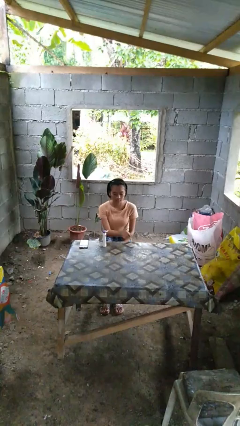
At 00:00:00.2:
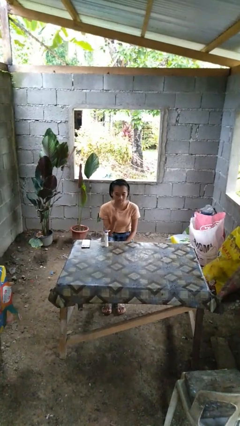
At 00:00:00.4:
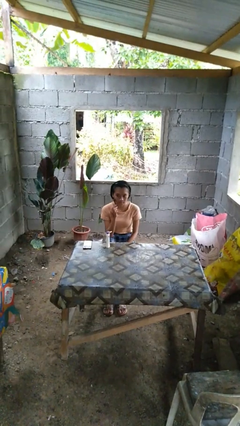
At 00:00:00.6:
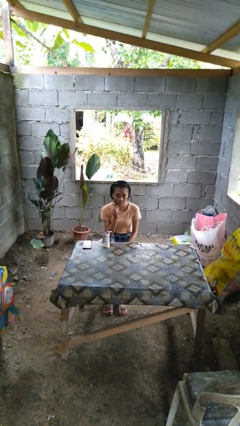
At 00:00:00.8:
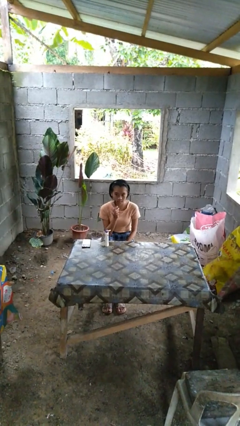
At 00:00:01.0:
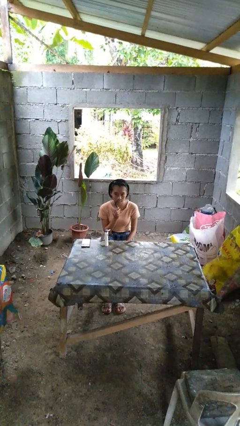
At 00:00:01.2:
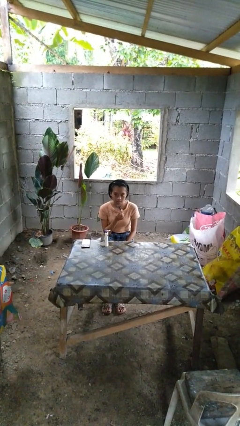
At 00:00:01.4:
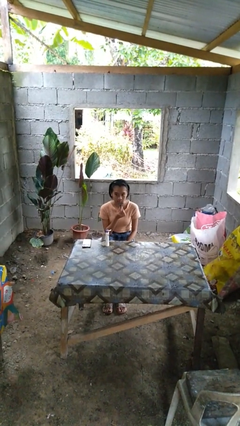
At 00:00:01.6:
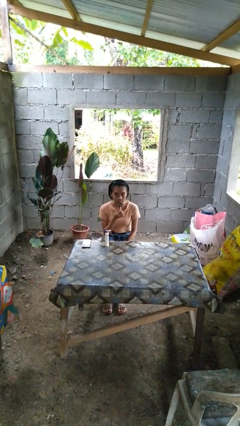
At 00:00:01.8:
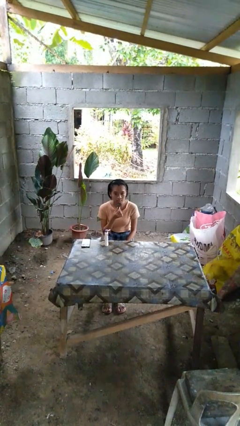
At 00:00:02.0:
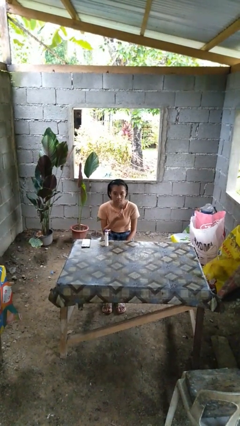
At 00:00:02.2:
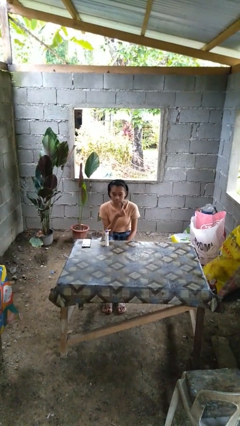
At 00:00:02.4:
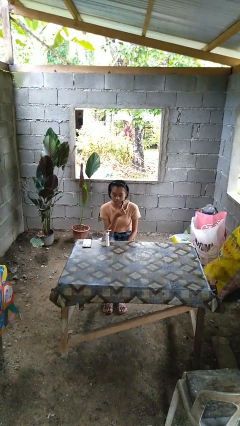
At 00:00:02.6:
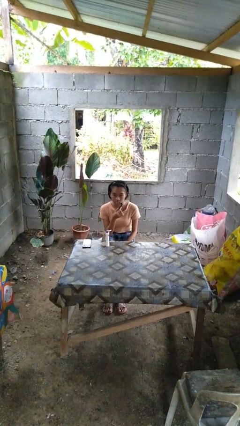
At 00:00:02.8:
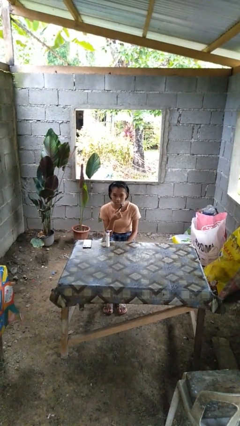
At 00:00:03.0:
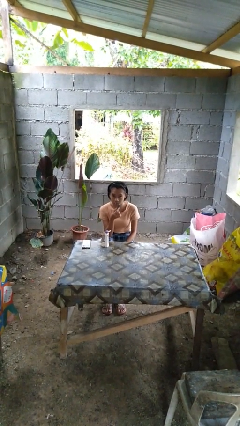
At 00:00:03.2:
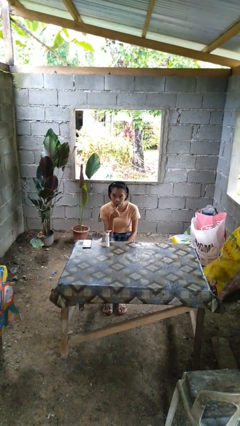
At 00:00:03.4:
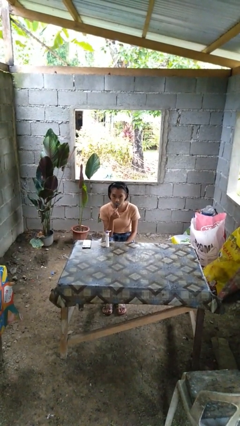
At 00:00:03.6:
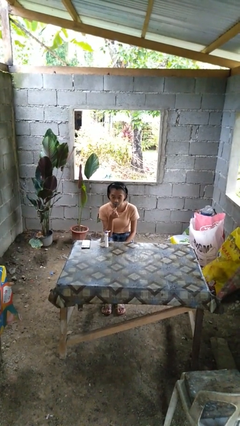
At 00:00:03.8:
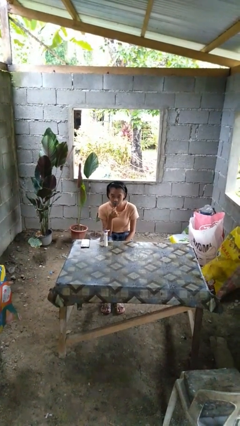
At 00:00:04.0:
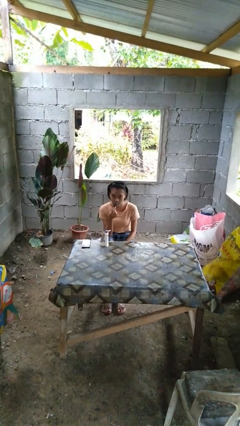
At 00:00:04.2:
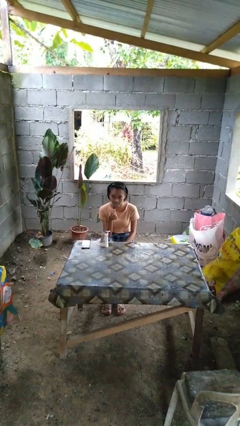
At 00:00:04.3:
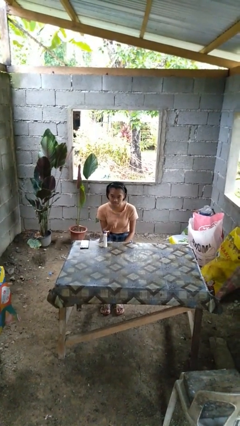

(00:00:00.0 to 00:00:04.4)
person shaves face

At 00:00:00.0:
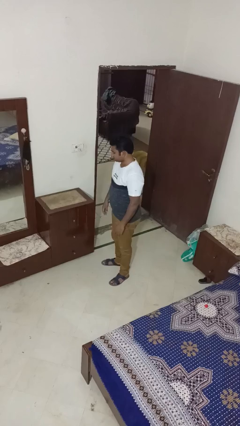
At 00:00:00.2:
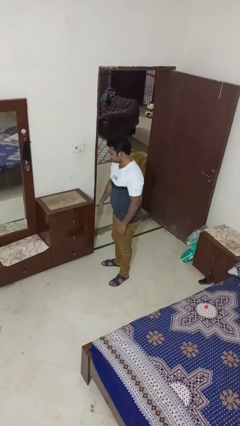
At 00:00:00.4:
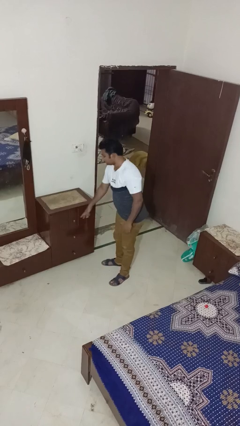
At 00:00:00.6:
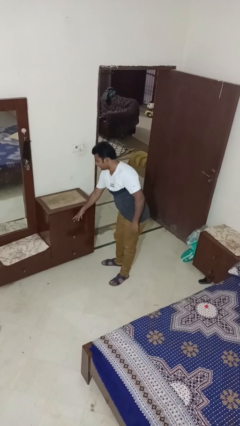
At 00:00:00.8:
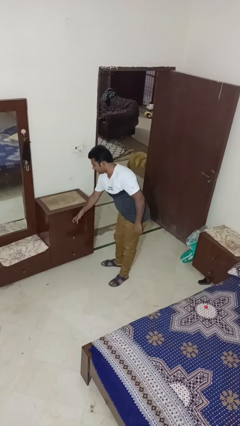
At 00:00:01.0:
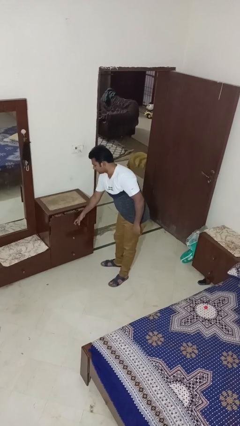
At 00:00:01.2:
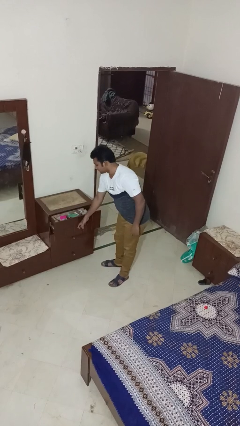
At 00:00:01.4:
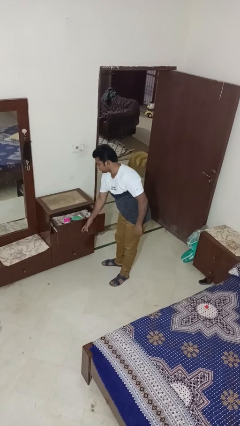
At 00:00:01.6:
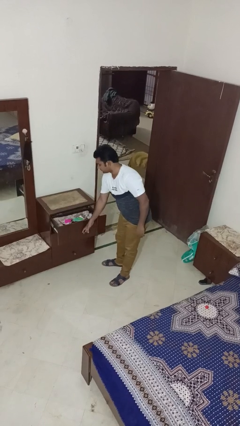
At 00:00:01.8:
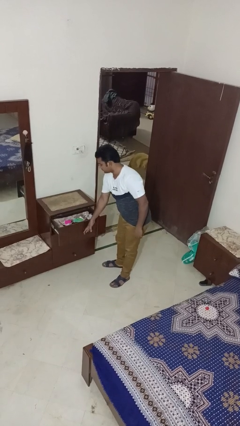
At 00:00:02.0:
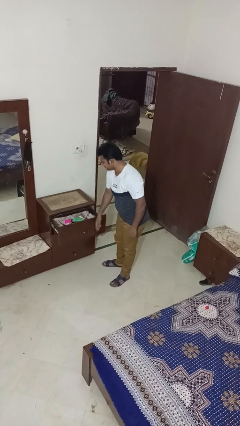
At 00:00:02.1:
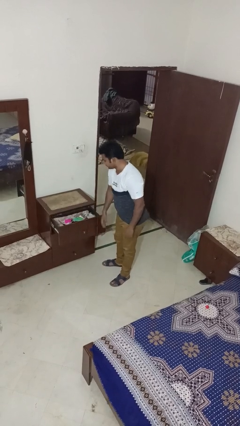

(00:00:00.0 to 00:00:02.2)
person opens dresser drawer

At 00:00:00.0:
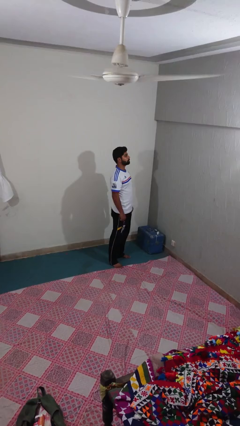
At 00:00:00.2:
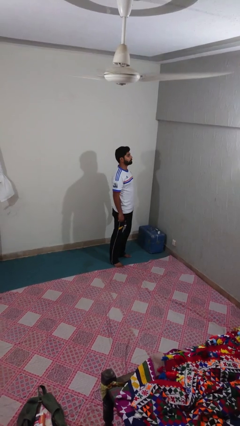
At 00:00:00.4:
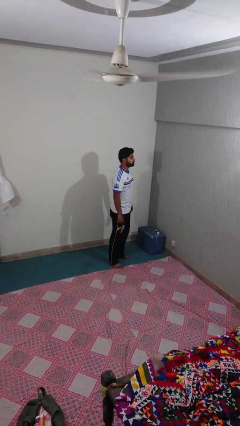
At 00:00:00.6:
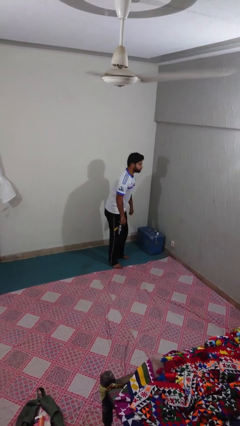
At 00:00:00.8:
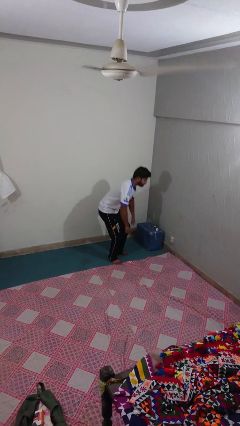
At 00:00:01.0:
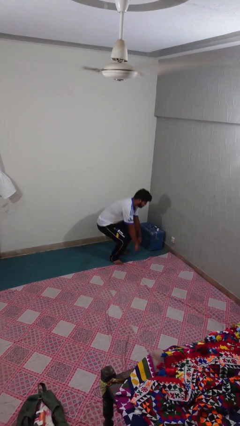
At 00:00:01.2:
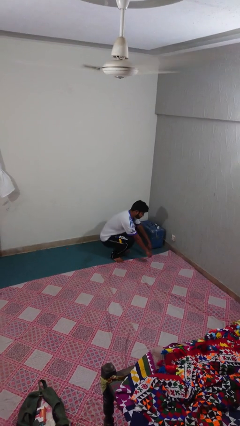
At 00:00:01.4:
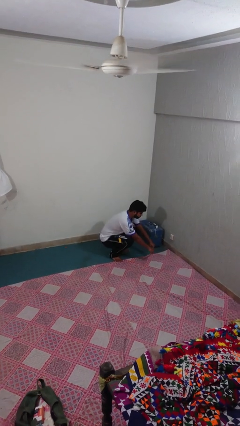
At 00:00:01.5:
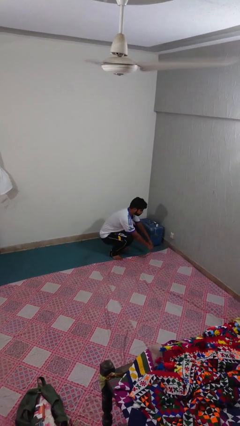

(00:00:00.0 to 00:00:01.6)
person squats

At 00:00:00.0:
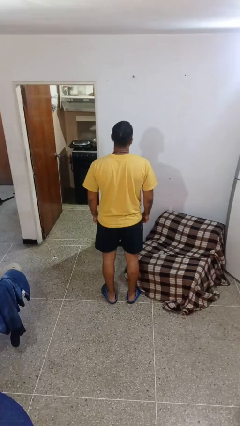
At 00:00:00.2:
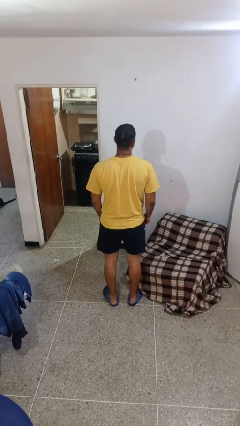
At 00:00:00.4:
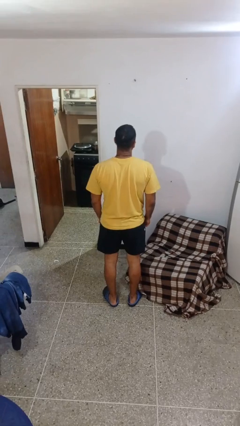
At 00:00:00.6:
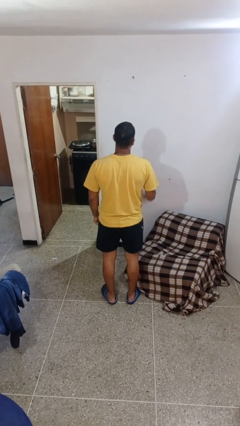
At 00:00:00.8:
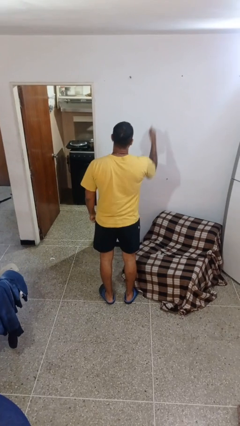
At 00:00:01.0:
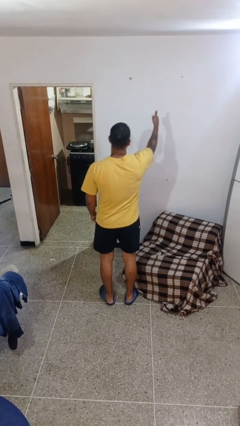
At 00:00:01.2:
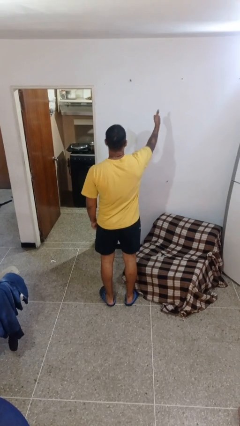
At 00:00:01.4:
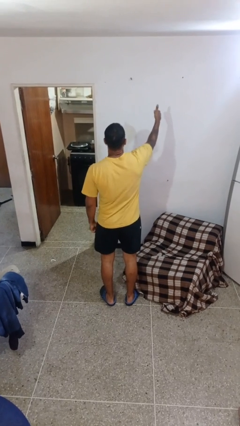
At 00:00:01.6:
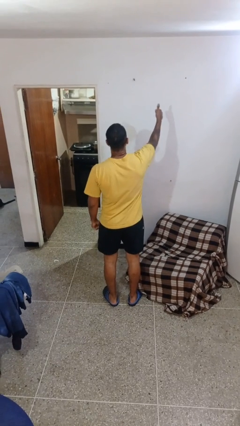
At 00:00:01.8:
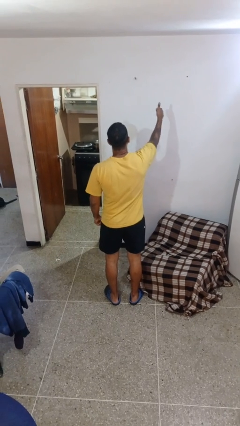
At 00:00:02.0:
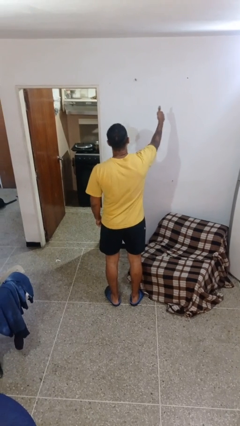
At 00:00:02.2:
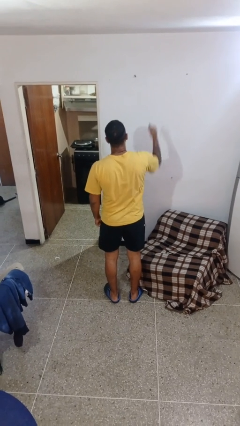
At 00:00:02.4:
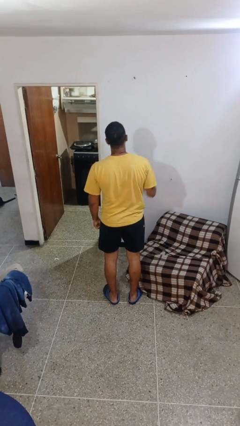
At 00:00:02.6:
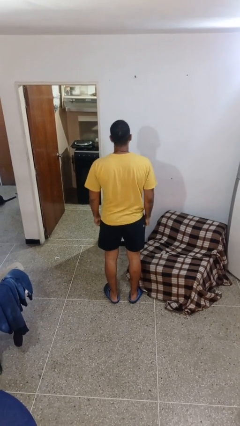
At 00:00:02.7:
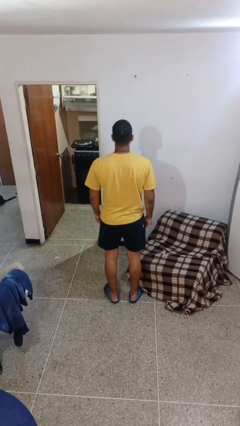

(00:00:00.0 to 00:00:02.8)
person gestures thumbs up

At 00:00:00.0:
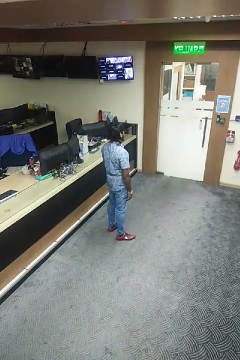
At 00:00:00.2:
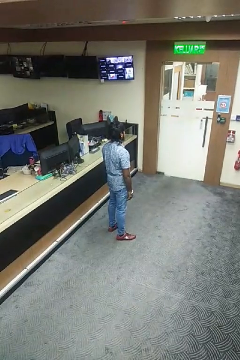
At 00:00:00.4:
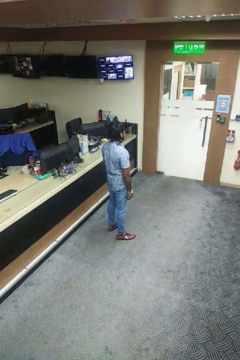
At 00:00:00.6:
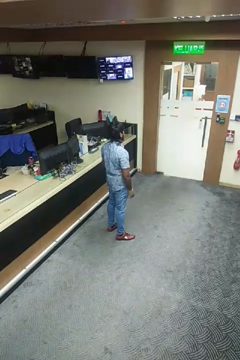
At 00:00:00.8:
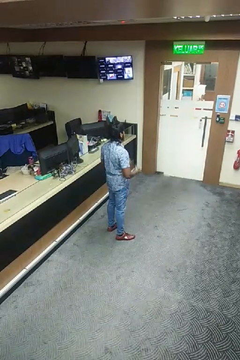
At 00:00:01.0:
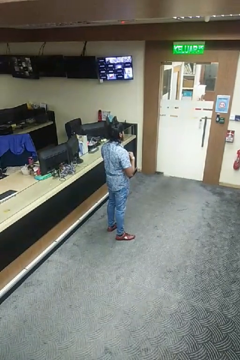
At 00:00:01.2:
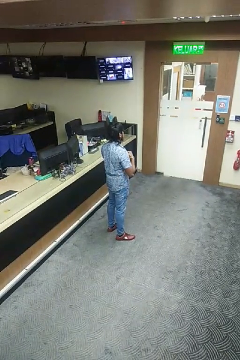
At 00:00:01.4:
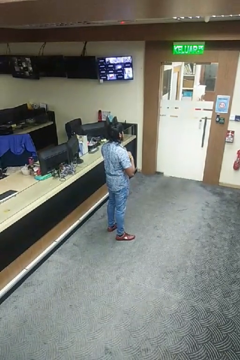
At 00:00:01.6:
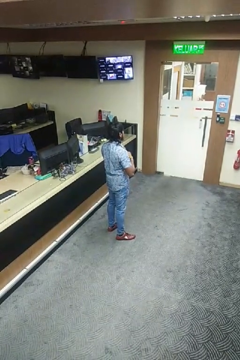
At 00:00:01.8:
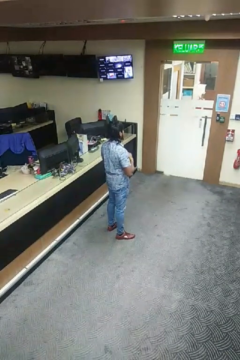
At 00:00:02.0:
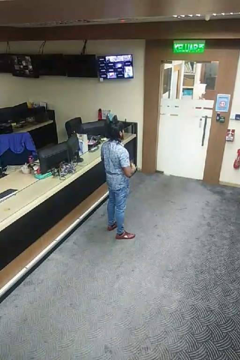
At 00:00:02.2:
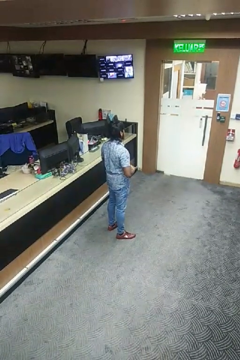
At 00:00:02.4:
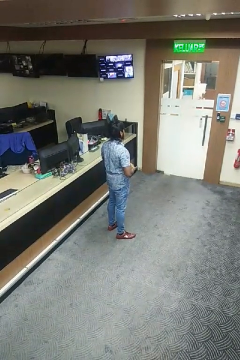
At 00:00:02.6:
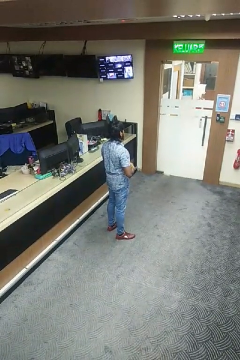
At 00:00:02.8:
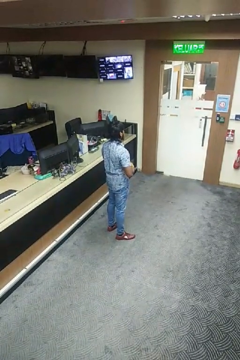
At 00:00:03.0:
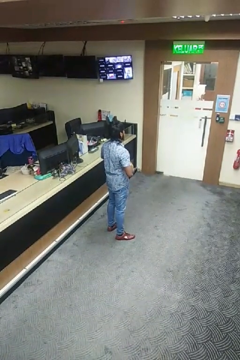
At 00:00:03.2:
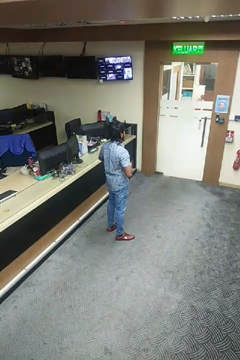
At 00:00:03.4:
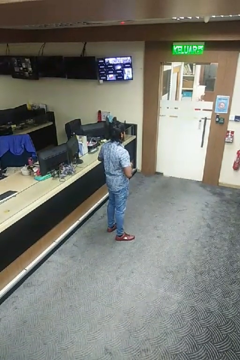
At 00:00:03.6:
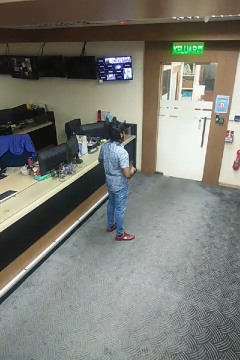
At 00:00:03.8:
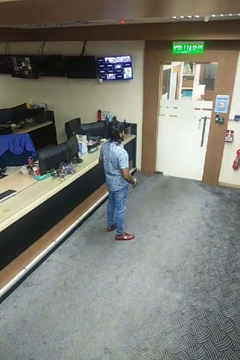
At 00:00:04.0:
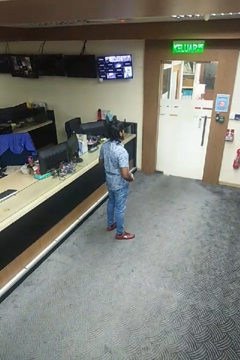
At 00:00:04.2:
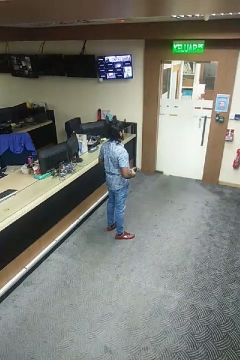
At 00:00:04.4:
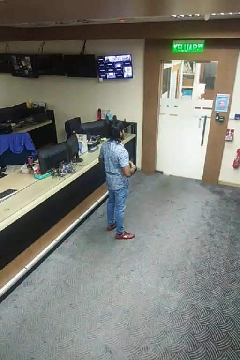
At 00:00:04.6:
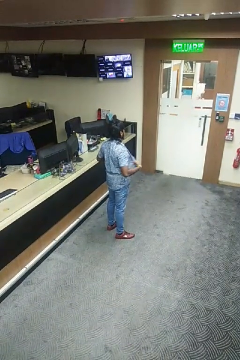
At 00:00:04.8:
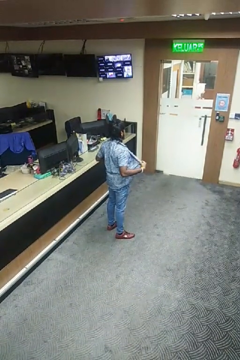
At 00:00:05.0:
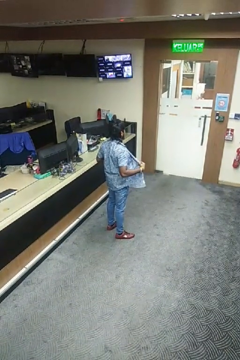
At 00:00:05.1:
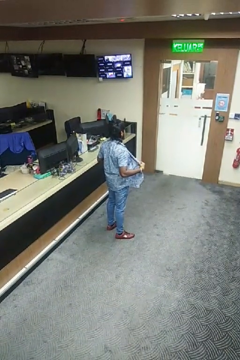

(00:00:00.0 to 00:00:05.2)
person unbuttons shirt

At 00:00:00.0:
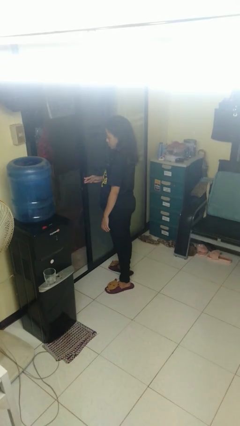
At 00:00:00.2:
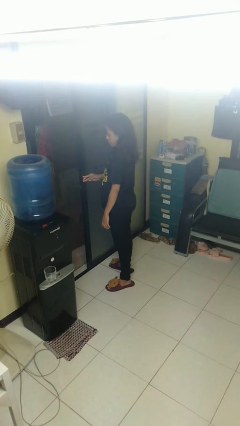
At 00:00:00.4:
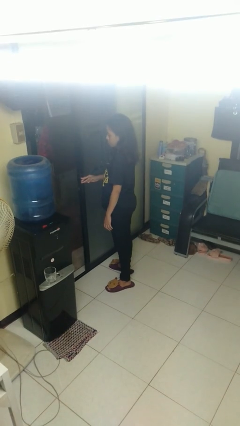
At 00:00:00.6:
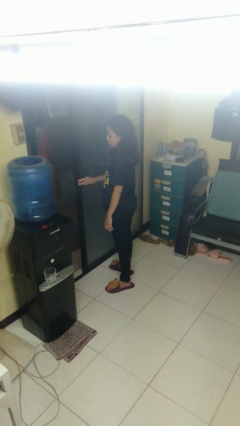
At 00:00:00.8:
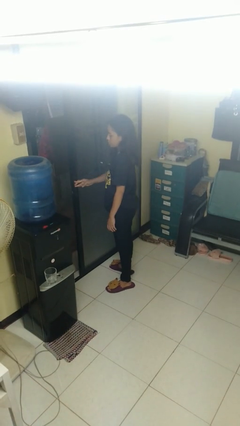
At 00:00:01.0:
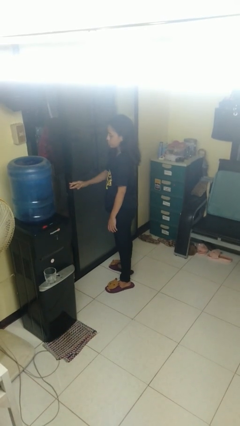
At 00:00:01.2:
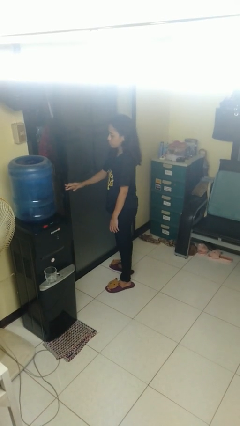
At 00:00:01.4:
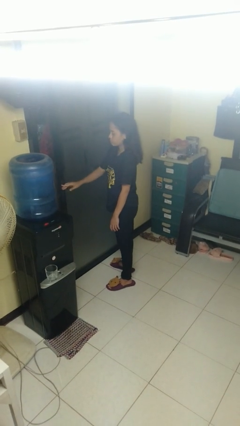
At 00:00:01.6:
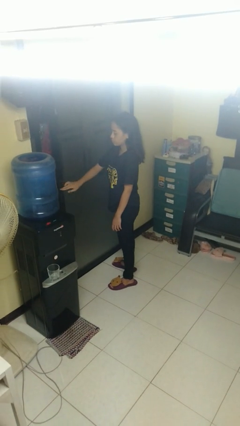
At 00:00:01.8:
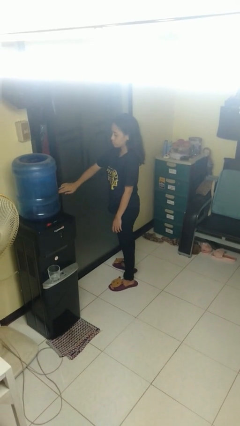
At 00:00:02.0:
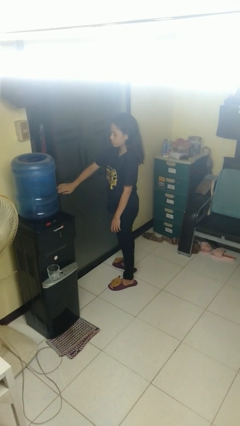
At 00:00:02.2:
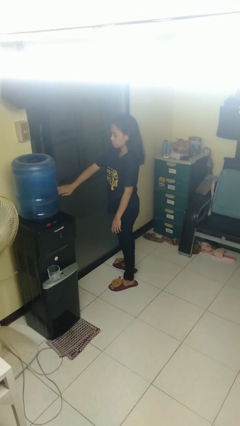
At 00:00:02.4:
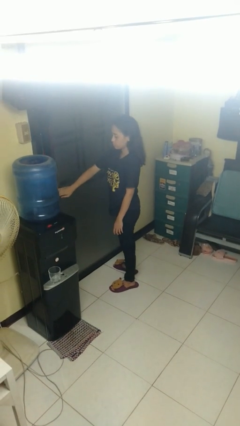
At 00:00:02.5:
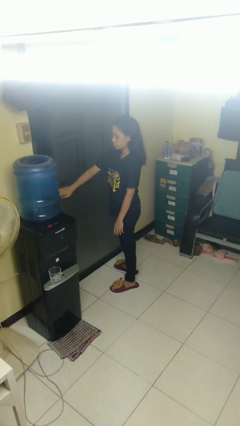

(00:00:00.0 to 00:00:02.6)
person closes sliding door
